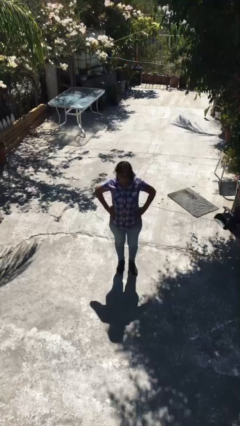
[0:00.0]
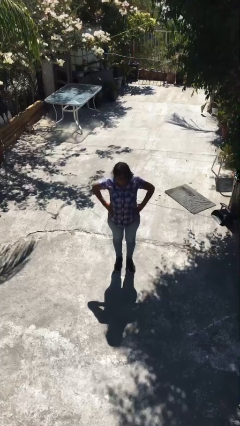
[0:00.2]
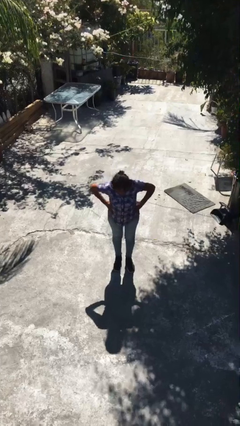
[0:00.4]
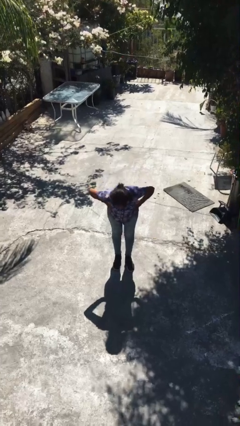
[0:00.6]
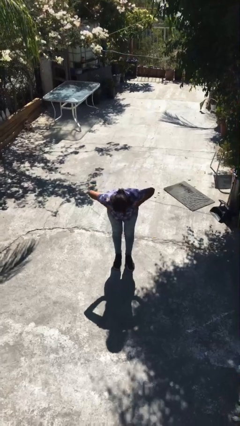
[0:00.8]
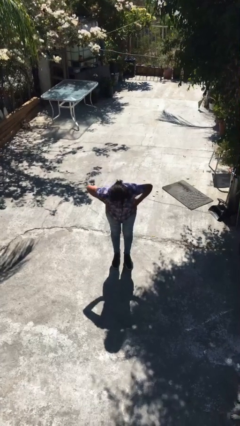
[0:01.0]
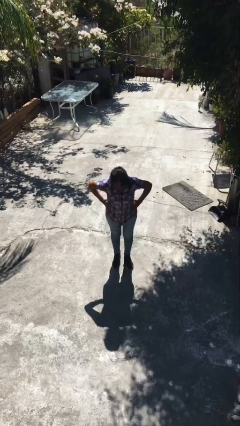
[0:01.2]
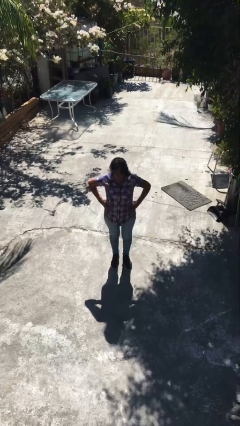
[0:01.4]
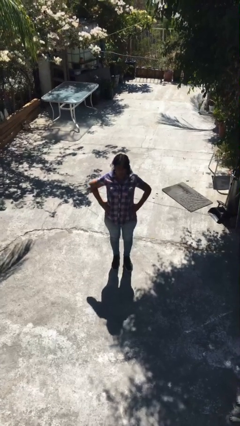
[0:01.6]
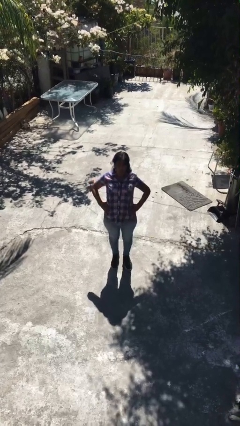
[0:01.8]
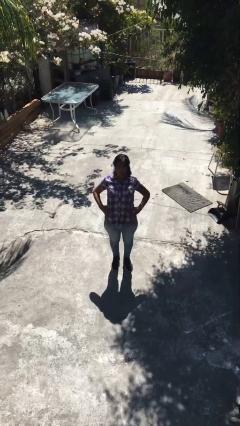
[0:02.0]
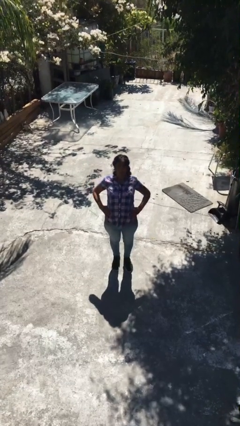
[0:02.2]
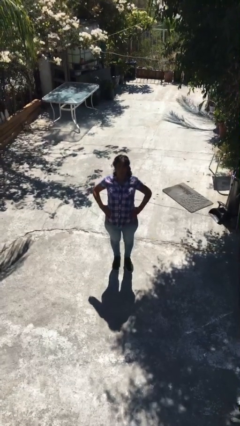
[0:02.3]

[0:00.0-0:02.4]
person wiggles hips

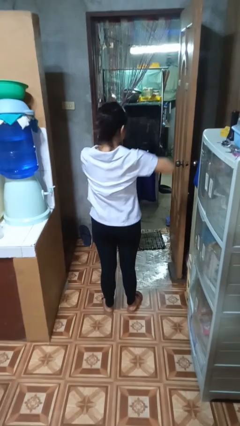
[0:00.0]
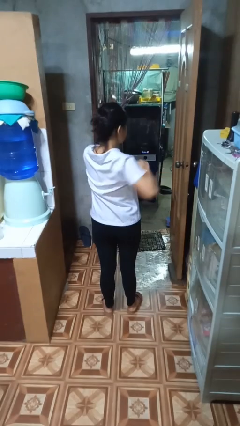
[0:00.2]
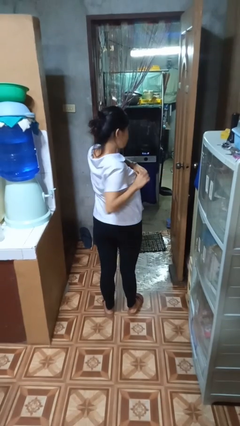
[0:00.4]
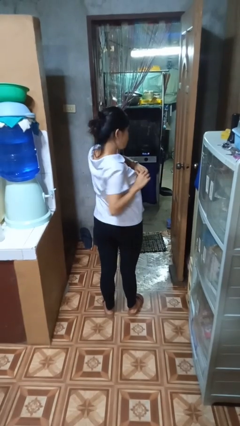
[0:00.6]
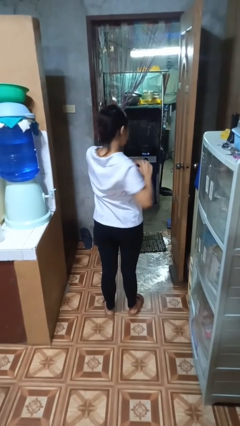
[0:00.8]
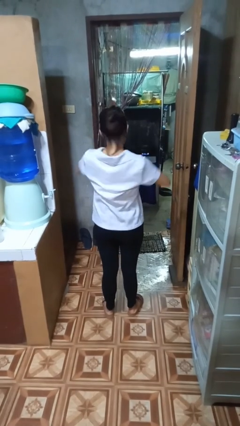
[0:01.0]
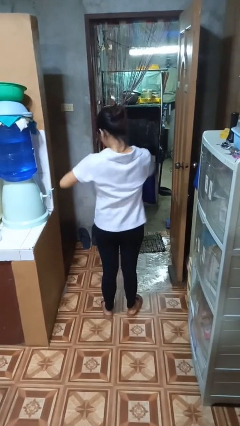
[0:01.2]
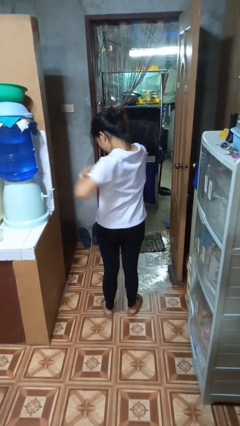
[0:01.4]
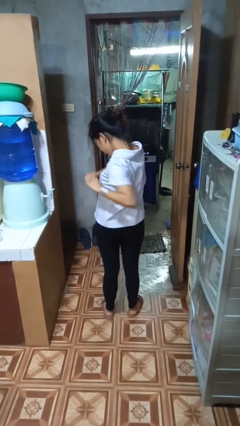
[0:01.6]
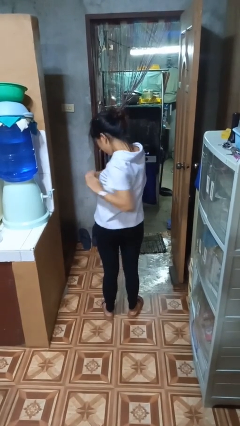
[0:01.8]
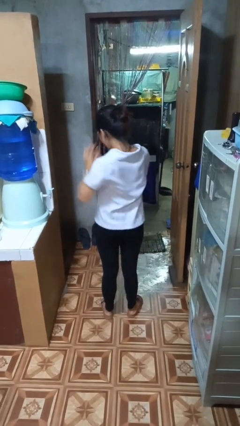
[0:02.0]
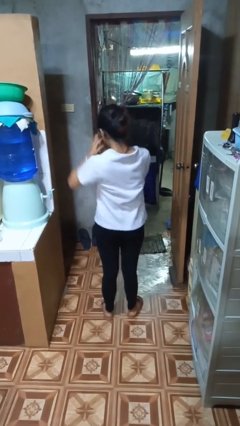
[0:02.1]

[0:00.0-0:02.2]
person stretches arms to side

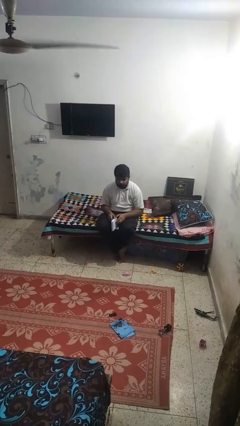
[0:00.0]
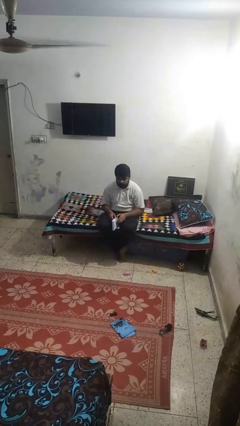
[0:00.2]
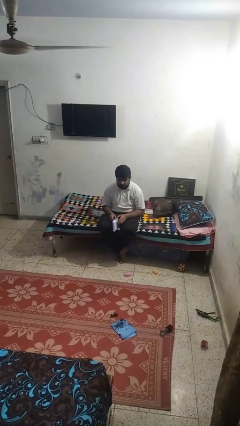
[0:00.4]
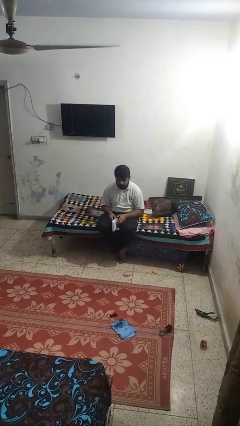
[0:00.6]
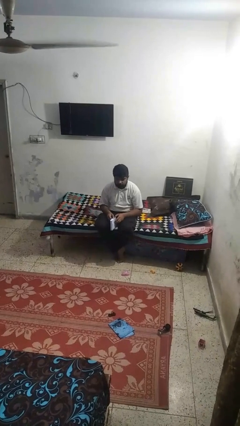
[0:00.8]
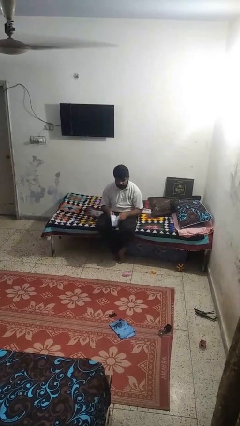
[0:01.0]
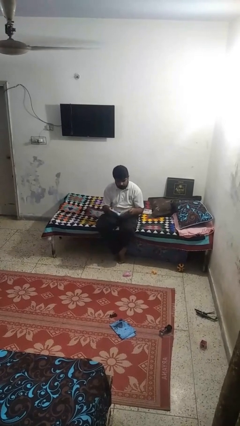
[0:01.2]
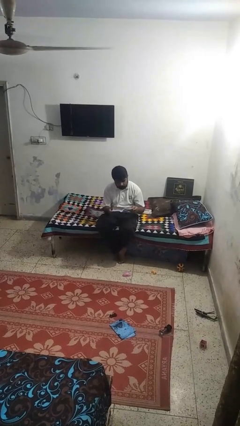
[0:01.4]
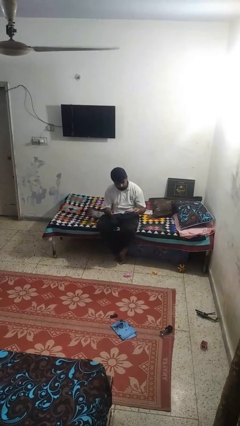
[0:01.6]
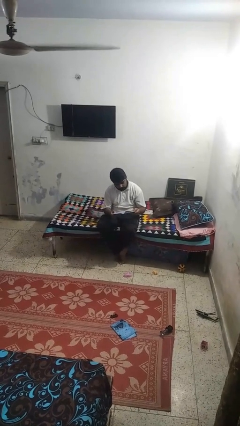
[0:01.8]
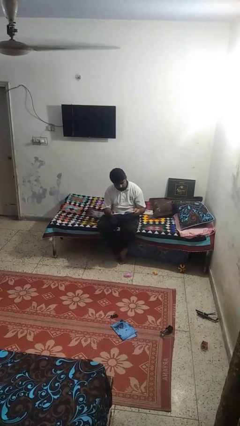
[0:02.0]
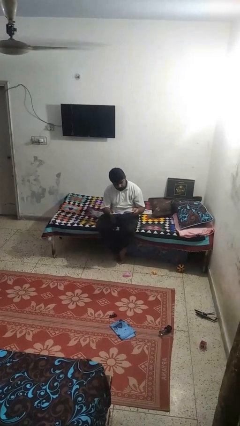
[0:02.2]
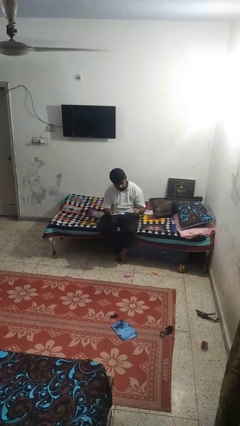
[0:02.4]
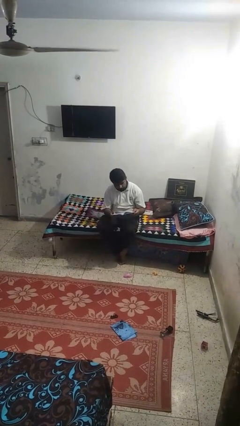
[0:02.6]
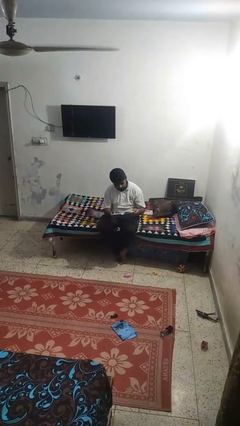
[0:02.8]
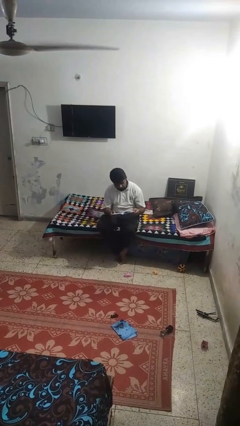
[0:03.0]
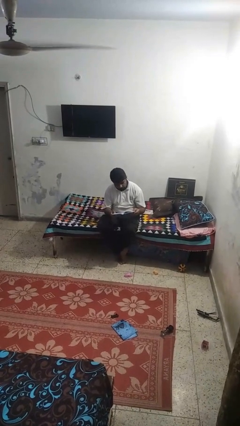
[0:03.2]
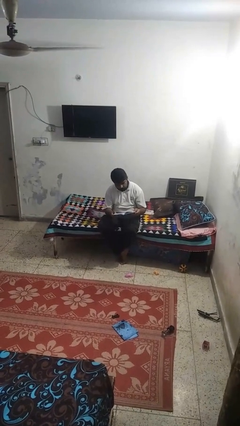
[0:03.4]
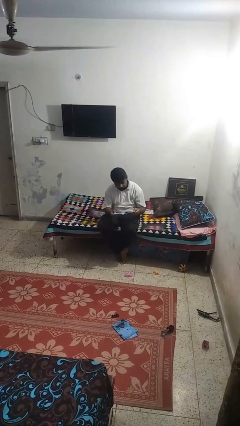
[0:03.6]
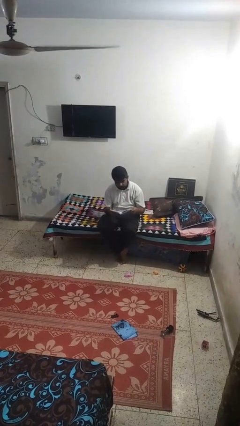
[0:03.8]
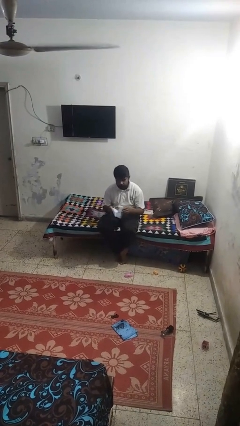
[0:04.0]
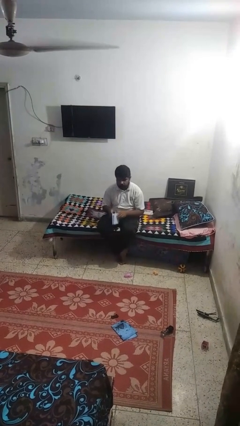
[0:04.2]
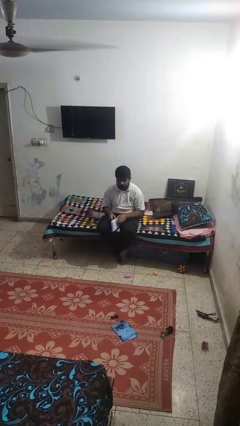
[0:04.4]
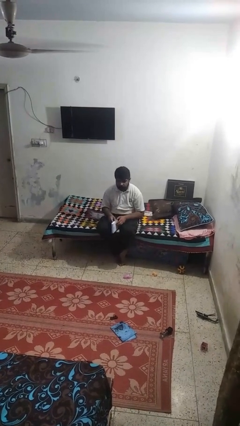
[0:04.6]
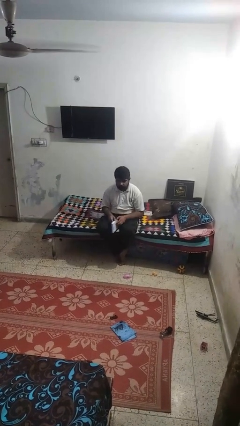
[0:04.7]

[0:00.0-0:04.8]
person reads book

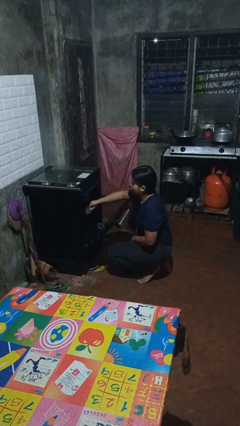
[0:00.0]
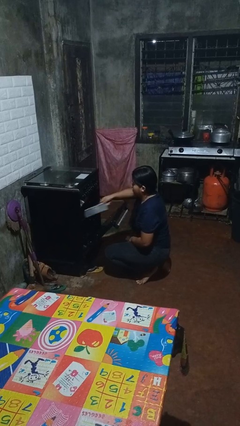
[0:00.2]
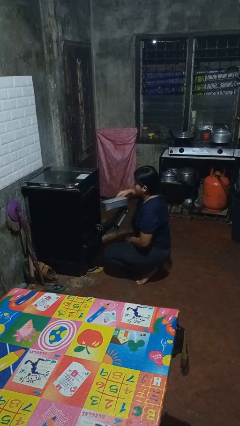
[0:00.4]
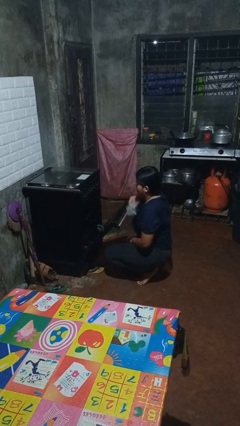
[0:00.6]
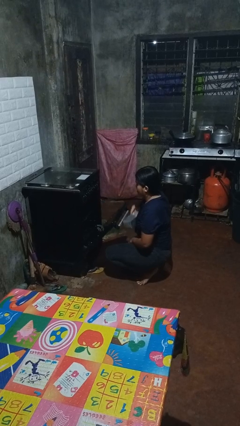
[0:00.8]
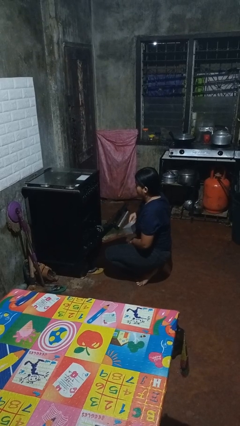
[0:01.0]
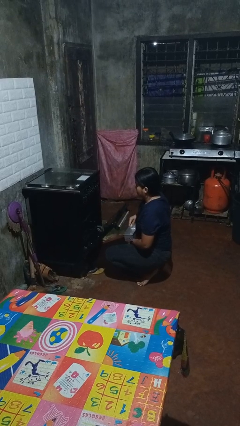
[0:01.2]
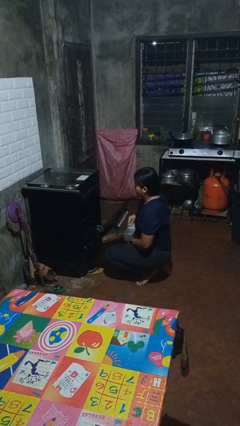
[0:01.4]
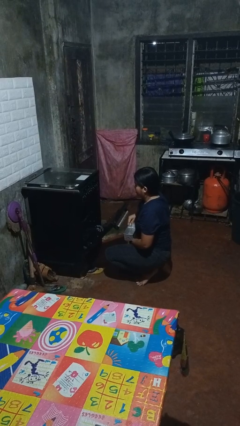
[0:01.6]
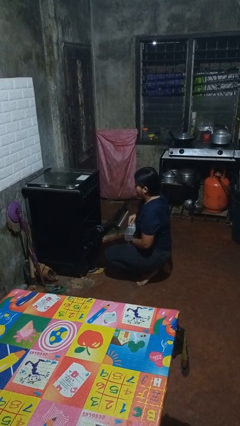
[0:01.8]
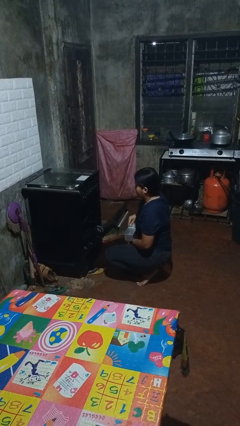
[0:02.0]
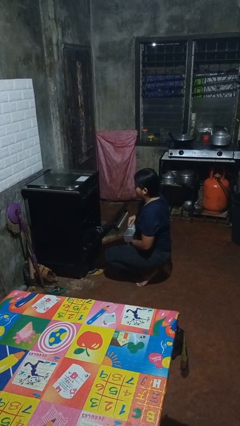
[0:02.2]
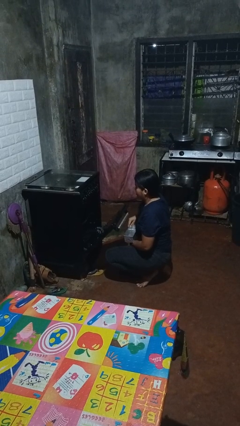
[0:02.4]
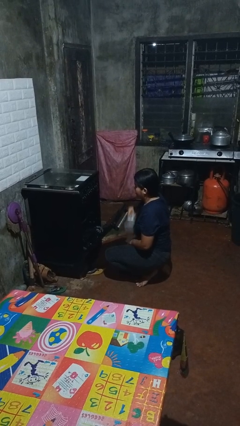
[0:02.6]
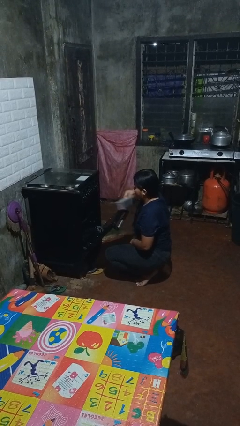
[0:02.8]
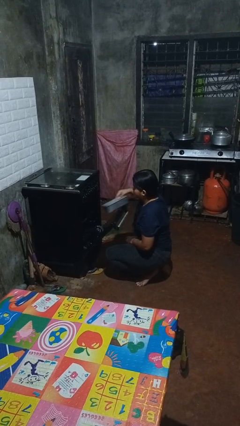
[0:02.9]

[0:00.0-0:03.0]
person takes object from oven

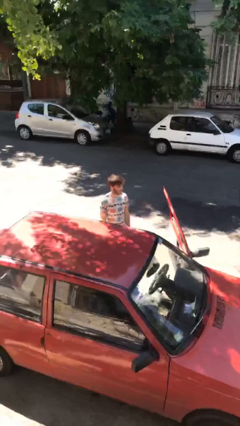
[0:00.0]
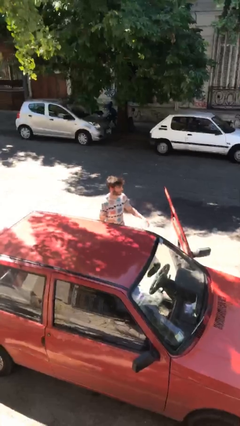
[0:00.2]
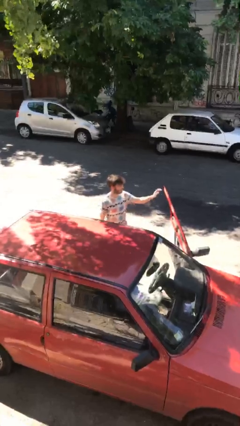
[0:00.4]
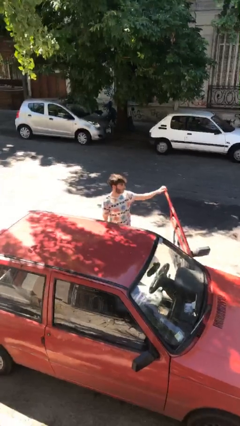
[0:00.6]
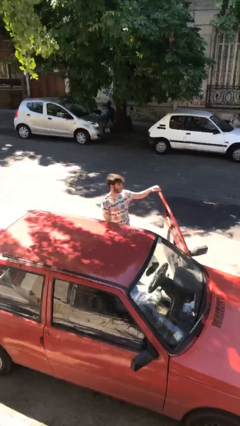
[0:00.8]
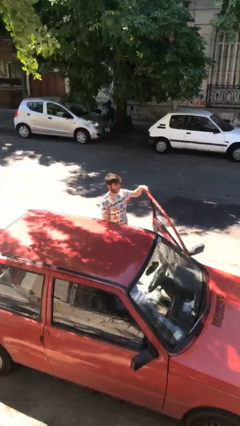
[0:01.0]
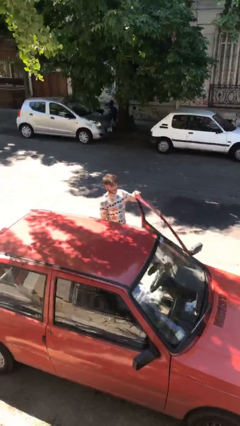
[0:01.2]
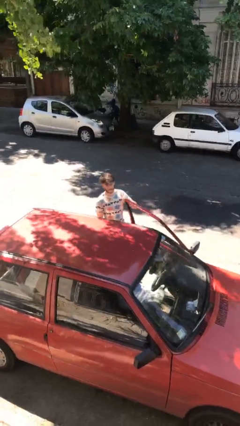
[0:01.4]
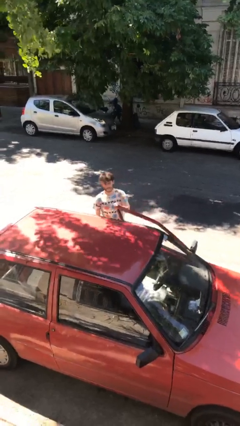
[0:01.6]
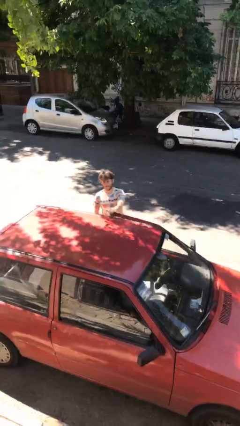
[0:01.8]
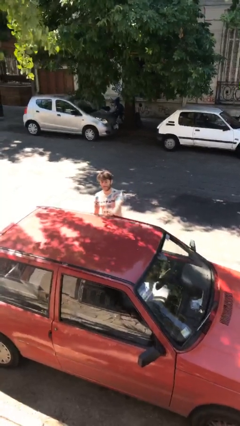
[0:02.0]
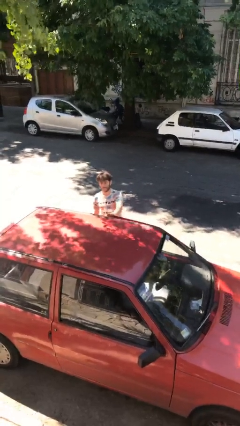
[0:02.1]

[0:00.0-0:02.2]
person closes car door

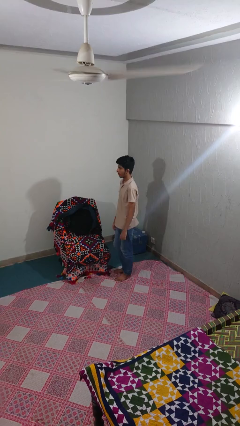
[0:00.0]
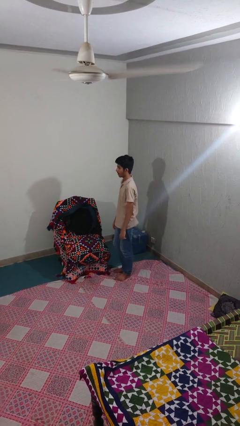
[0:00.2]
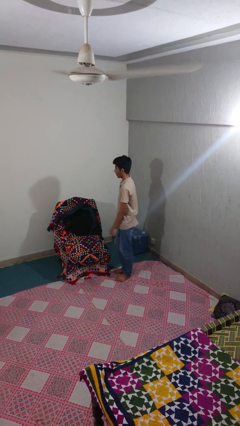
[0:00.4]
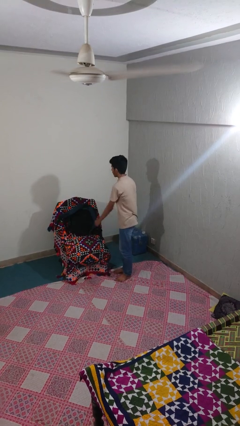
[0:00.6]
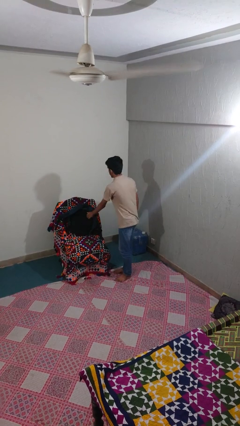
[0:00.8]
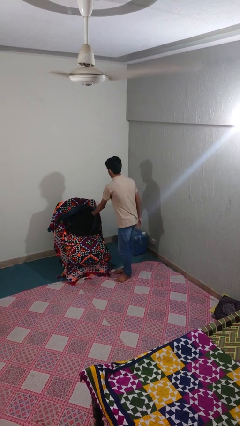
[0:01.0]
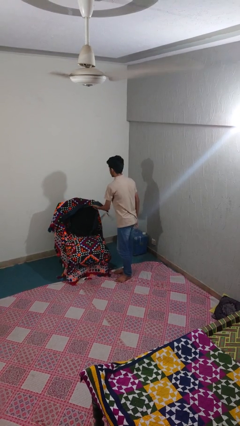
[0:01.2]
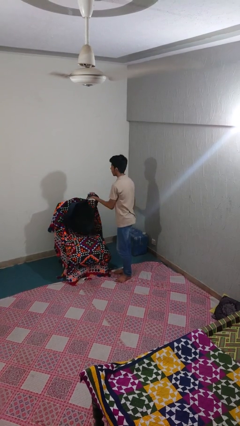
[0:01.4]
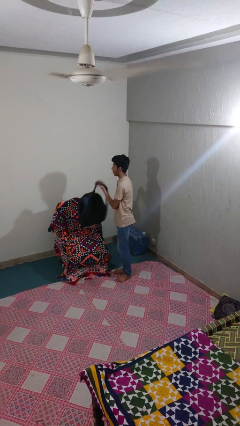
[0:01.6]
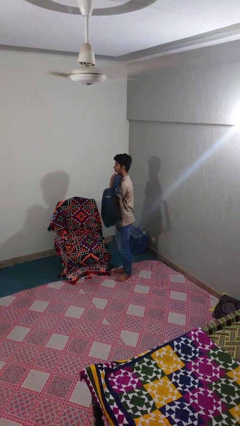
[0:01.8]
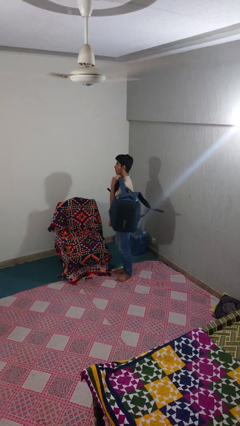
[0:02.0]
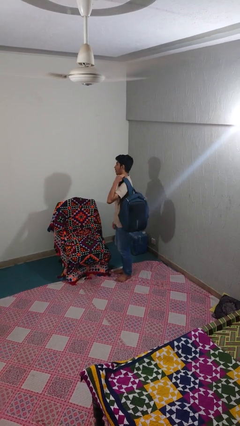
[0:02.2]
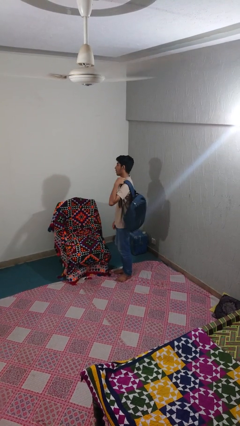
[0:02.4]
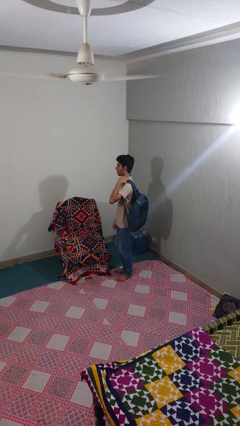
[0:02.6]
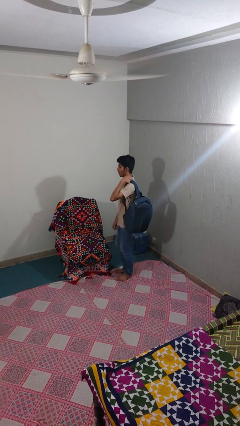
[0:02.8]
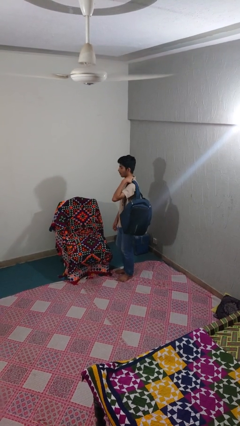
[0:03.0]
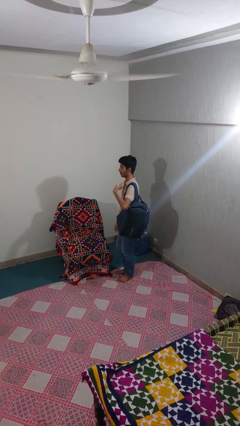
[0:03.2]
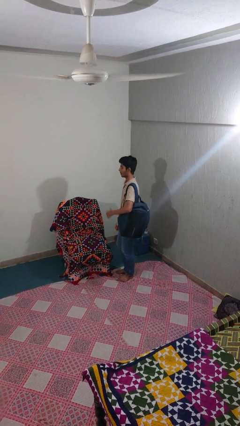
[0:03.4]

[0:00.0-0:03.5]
person picks up object from couch
